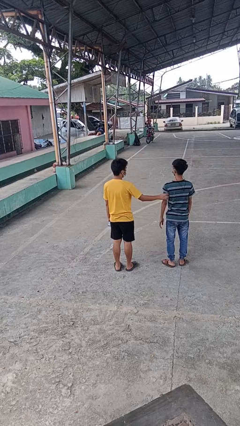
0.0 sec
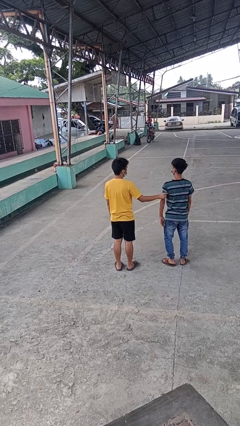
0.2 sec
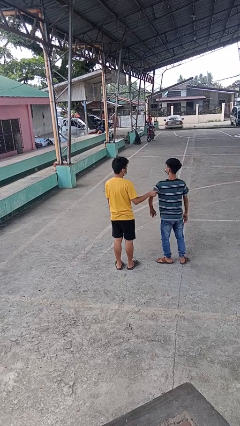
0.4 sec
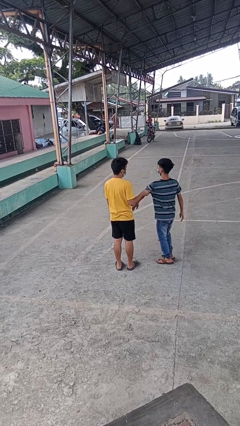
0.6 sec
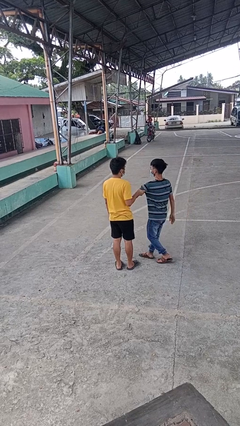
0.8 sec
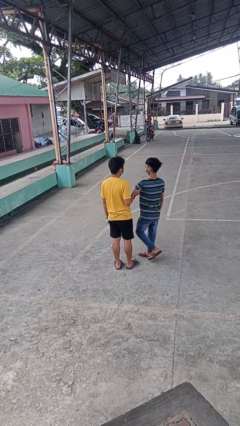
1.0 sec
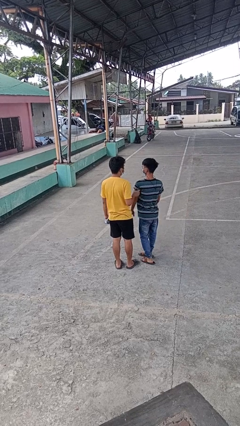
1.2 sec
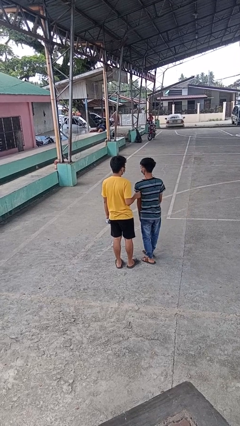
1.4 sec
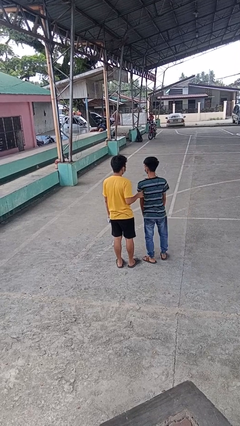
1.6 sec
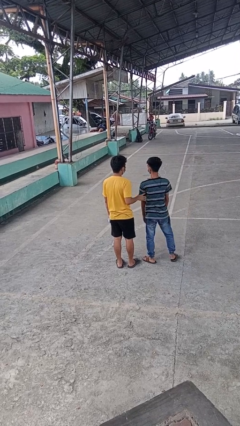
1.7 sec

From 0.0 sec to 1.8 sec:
person grabs person by bicep

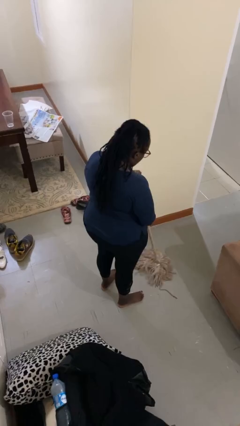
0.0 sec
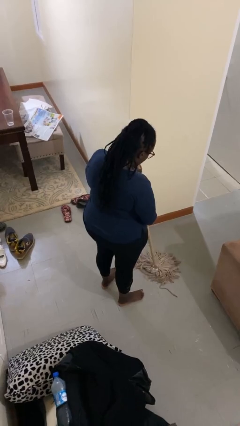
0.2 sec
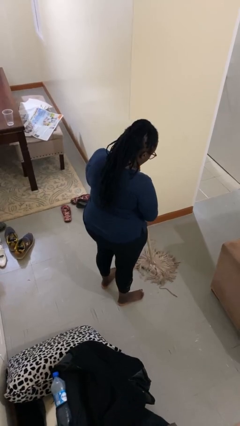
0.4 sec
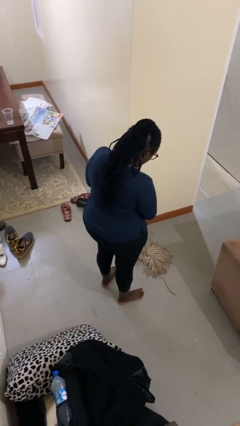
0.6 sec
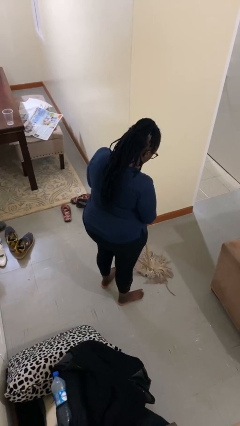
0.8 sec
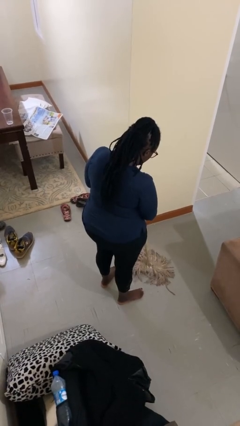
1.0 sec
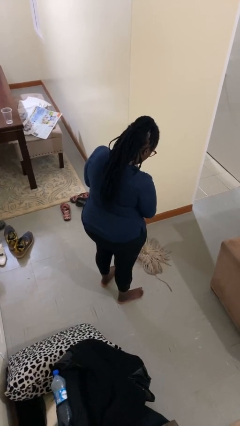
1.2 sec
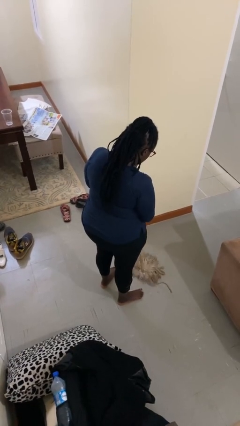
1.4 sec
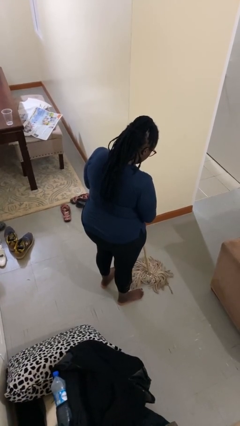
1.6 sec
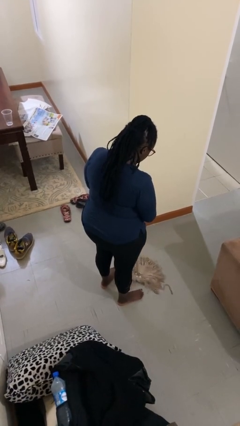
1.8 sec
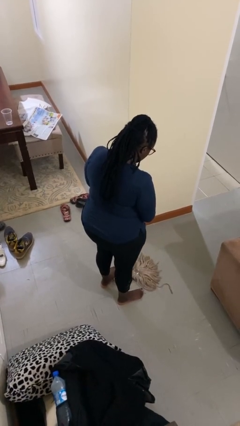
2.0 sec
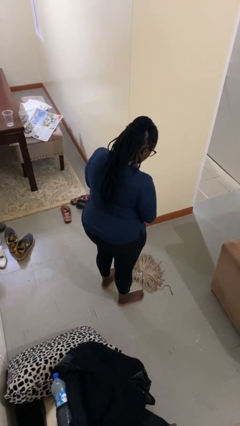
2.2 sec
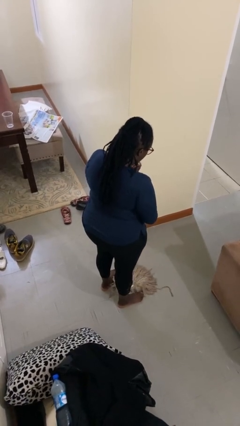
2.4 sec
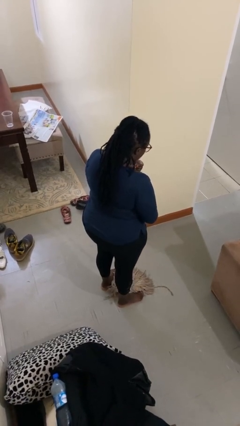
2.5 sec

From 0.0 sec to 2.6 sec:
person mops

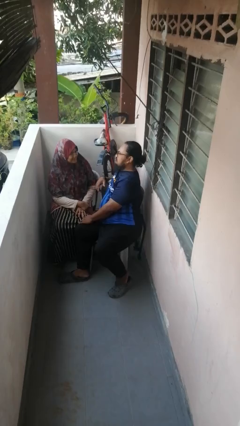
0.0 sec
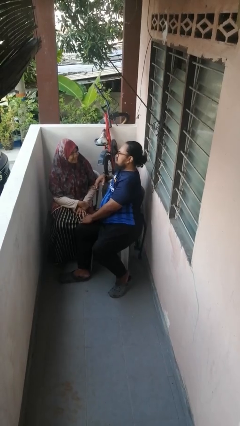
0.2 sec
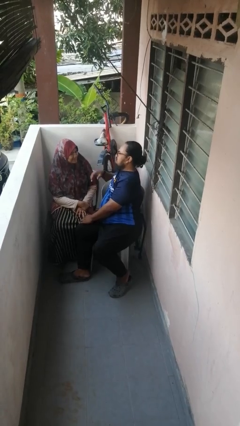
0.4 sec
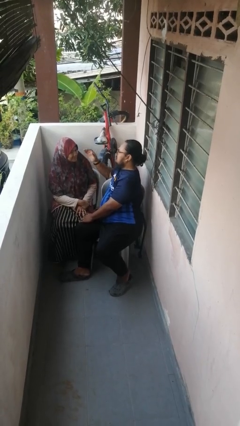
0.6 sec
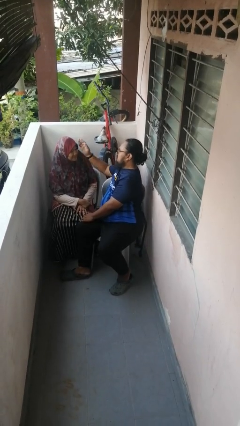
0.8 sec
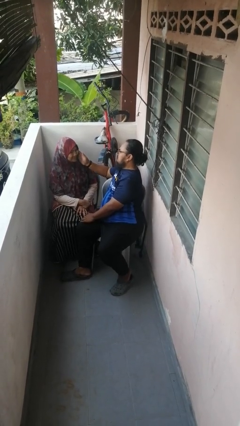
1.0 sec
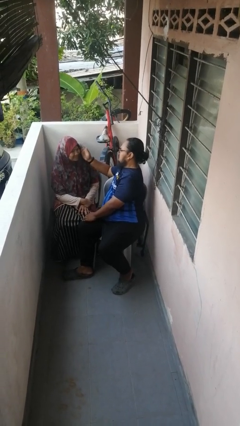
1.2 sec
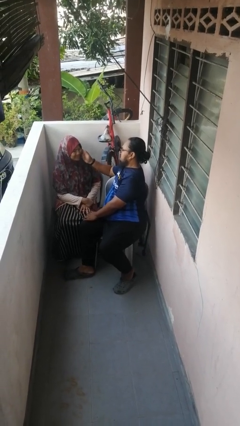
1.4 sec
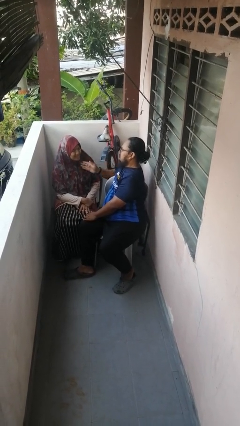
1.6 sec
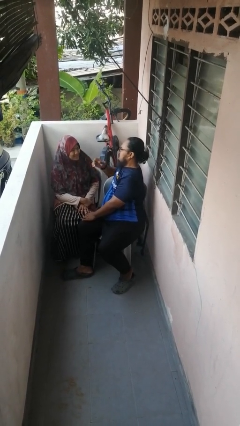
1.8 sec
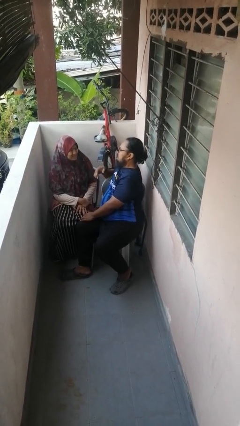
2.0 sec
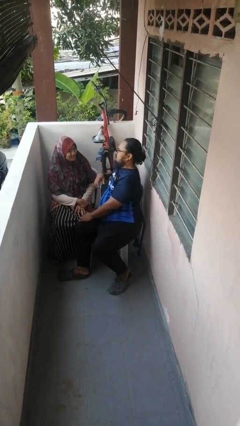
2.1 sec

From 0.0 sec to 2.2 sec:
person touches face of person

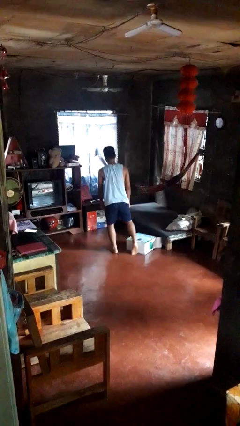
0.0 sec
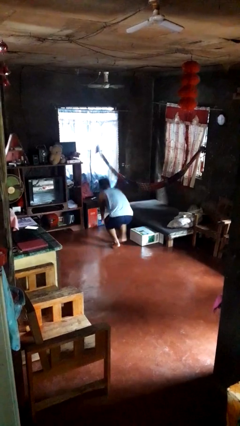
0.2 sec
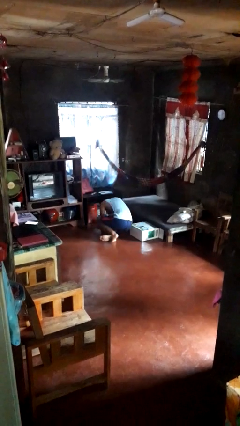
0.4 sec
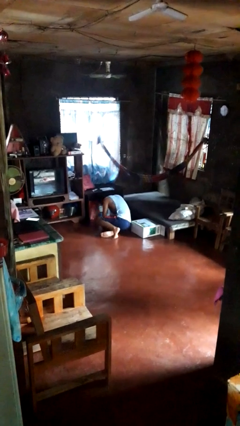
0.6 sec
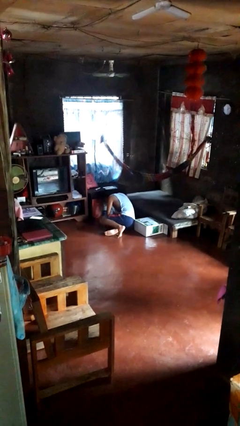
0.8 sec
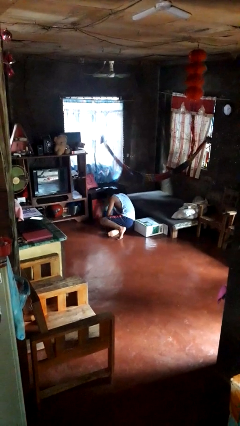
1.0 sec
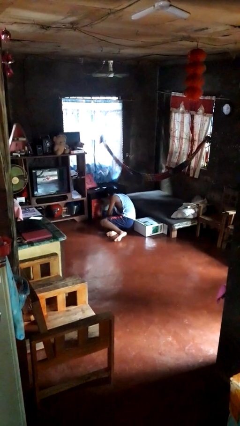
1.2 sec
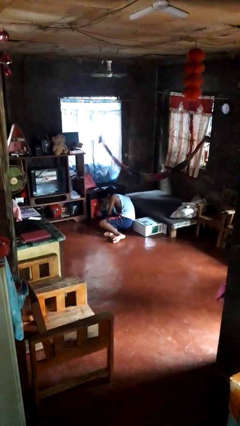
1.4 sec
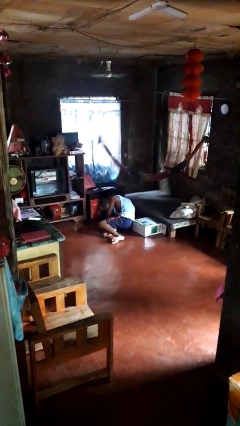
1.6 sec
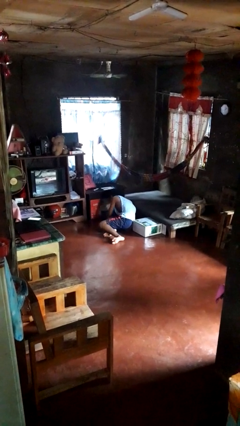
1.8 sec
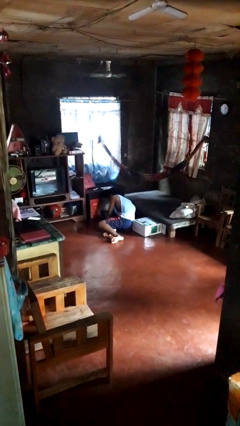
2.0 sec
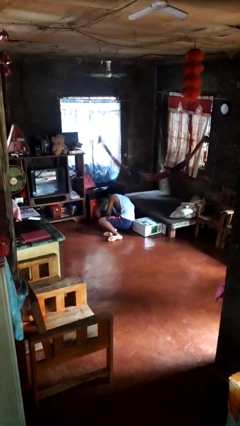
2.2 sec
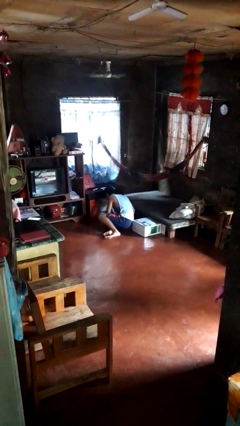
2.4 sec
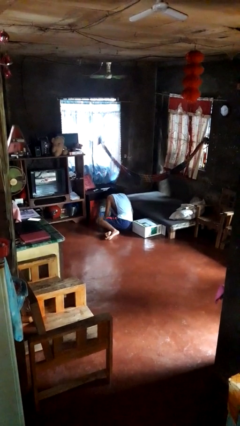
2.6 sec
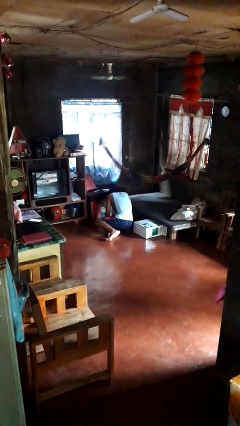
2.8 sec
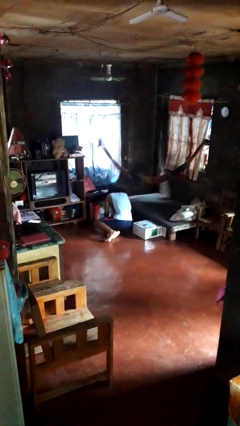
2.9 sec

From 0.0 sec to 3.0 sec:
person trips on object on floor

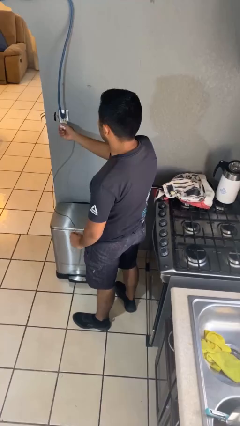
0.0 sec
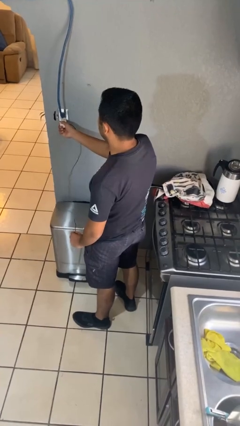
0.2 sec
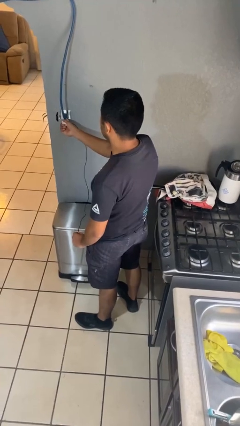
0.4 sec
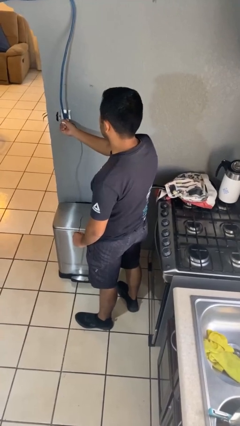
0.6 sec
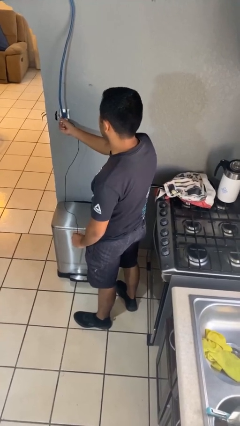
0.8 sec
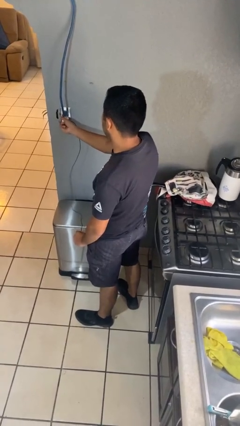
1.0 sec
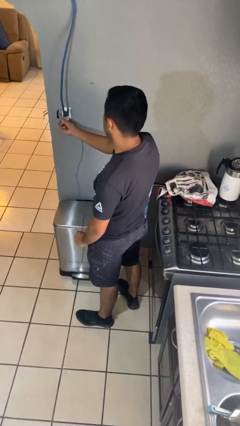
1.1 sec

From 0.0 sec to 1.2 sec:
person plugs into electrical socket

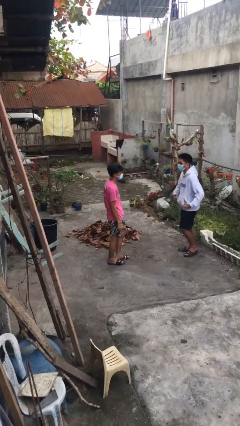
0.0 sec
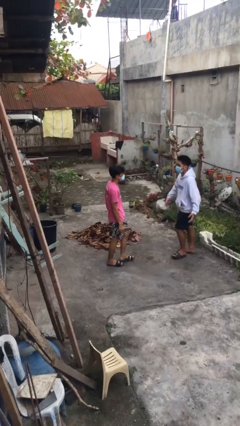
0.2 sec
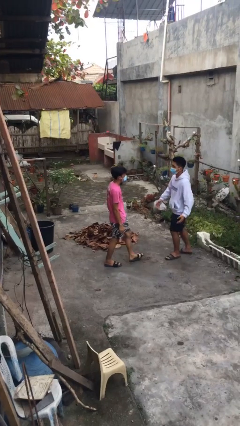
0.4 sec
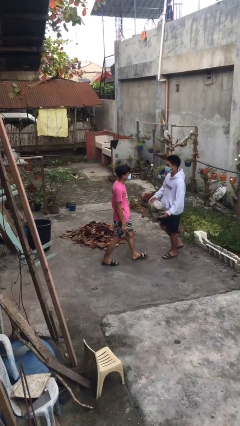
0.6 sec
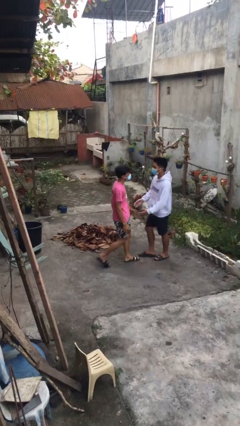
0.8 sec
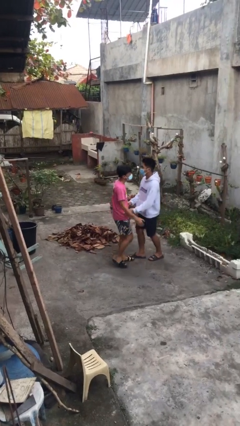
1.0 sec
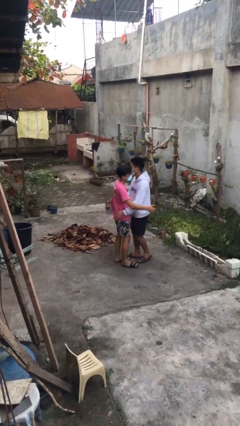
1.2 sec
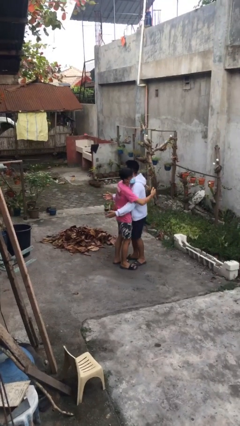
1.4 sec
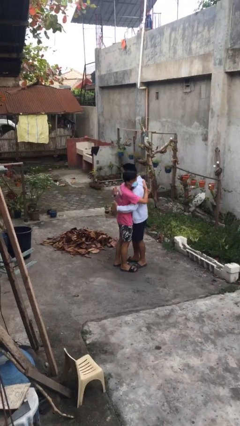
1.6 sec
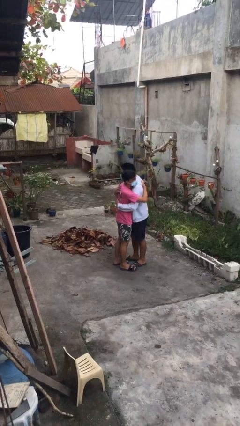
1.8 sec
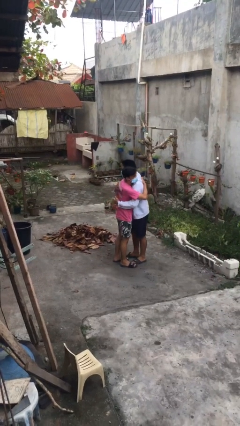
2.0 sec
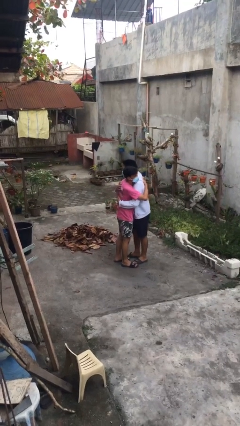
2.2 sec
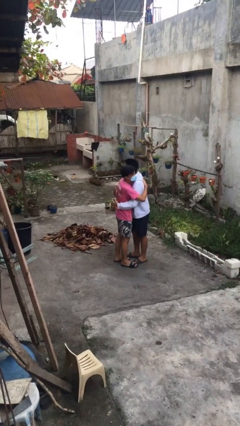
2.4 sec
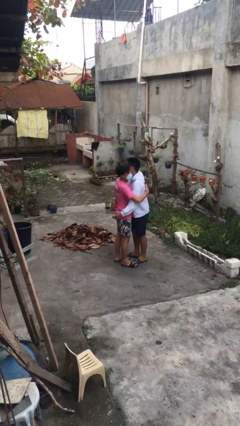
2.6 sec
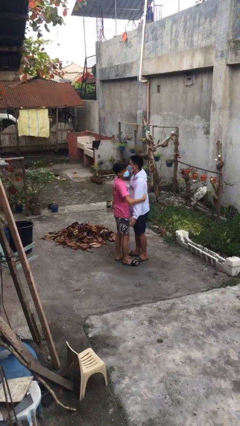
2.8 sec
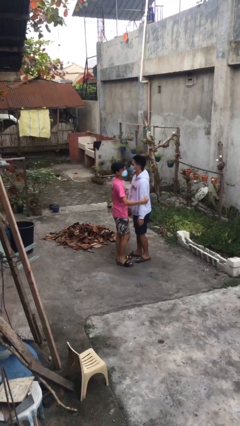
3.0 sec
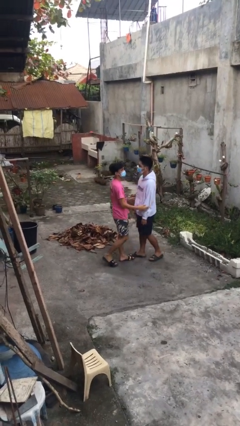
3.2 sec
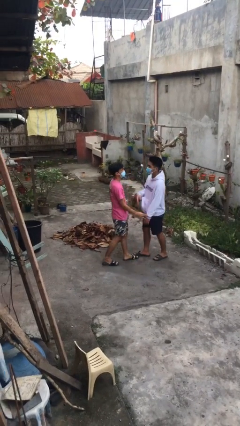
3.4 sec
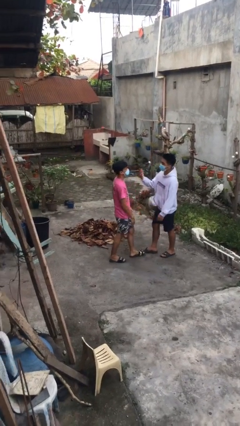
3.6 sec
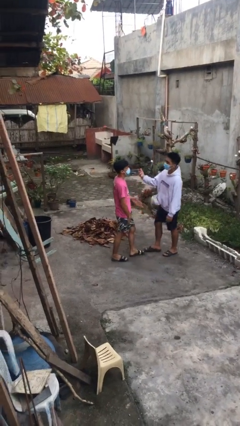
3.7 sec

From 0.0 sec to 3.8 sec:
person embraces person

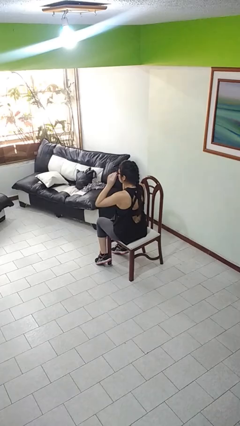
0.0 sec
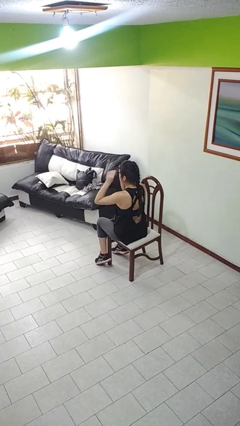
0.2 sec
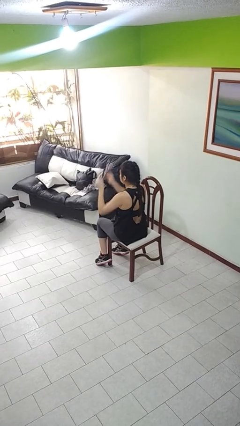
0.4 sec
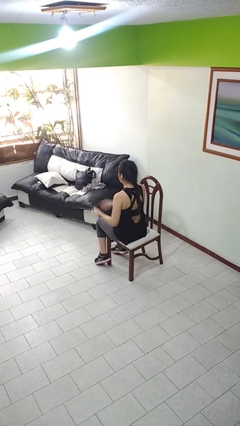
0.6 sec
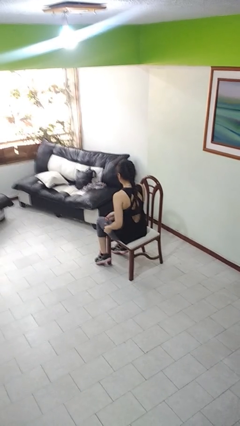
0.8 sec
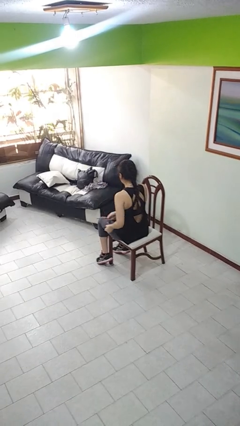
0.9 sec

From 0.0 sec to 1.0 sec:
person takes off glasses

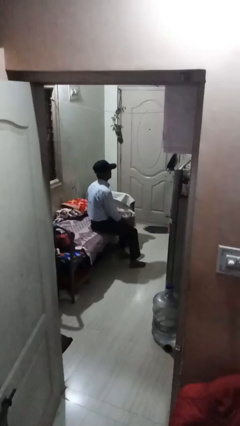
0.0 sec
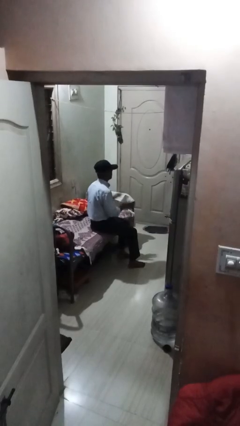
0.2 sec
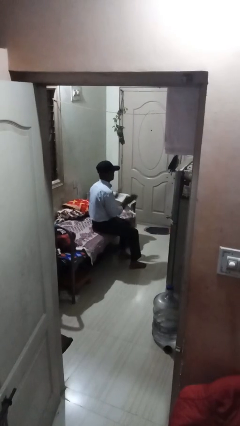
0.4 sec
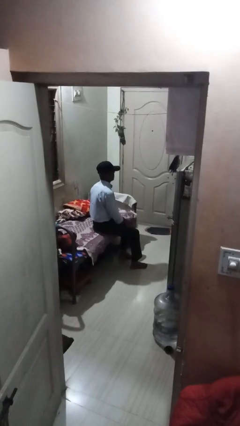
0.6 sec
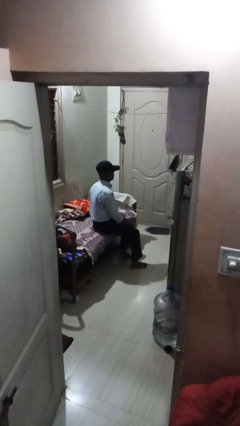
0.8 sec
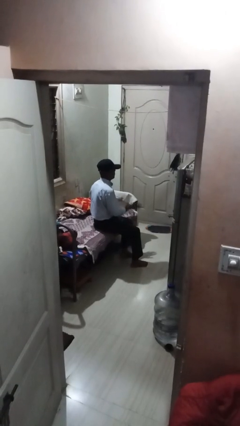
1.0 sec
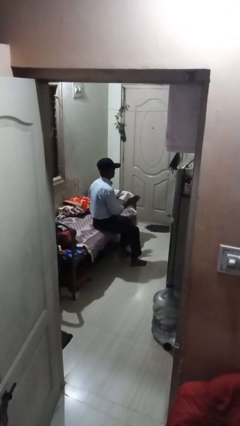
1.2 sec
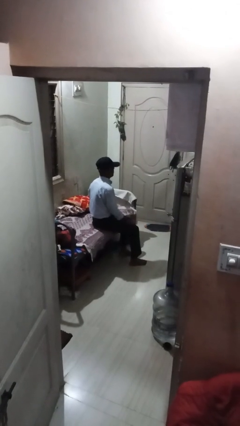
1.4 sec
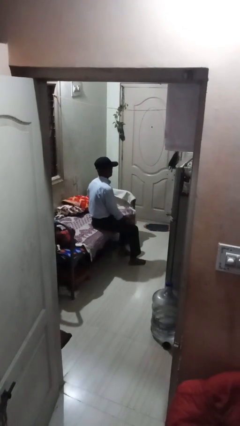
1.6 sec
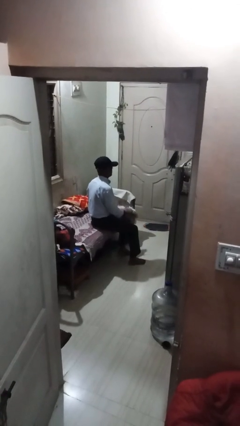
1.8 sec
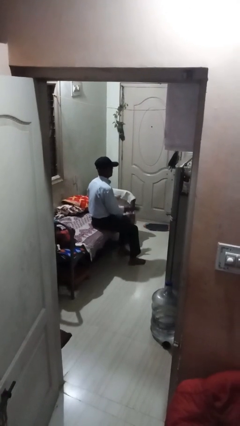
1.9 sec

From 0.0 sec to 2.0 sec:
person slaps hands on thighs
